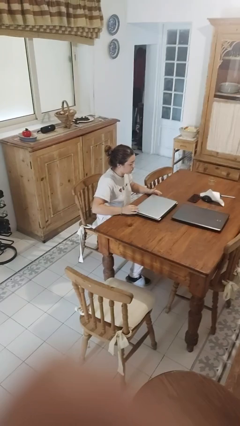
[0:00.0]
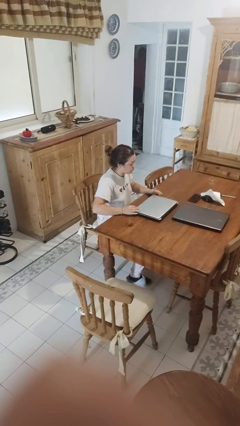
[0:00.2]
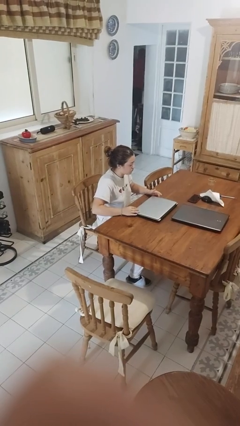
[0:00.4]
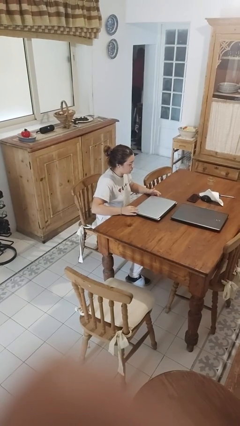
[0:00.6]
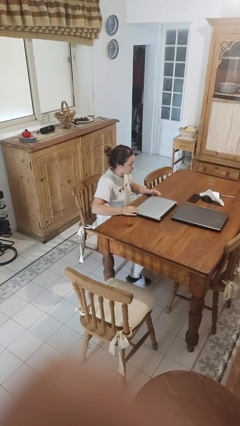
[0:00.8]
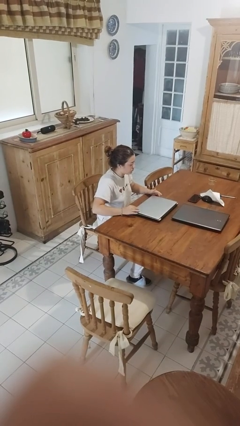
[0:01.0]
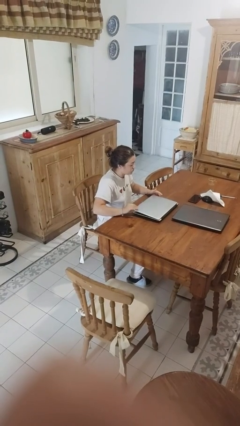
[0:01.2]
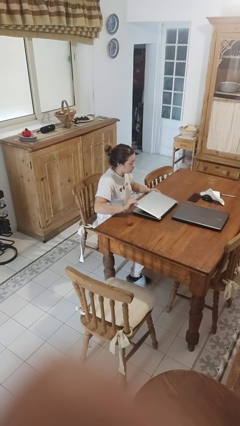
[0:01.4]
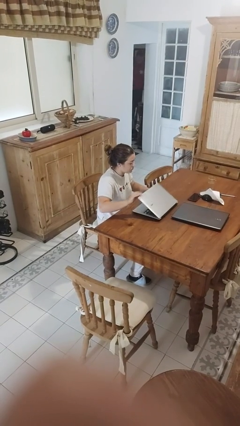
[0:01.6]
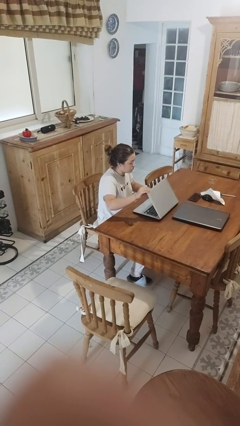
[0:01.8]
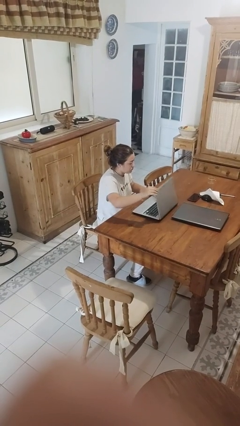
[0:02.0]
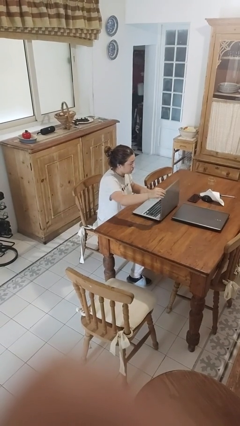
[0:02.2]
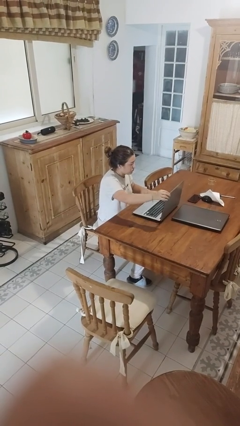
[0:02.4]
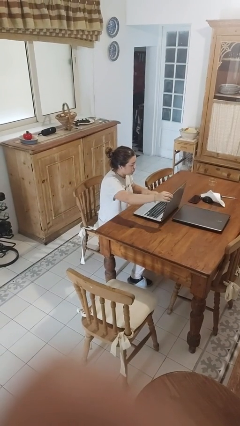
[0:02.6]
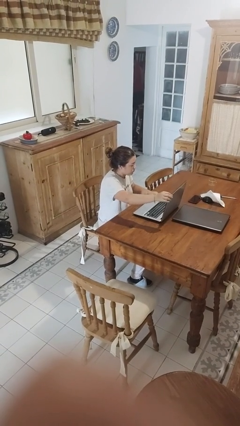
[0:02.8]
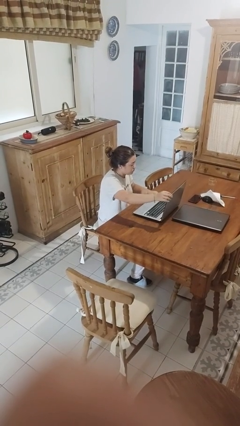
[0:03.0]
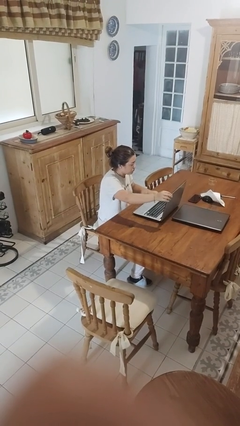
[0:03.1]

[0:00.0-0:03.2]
person opens laptop

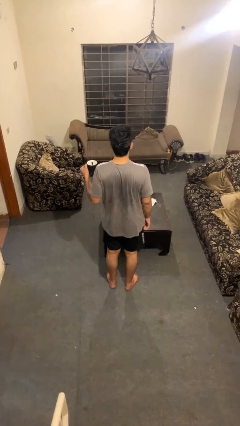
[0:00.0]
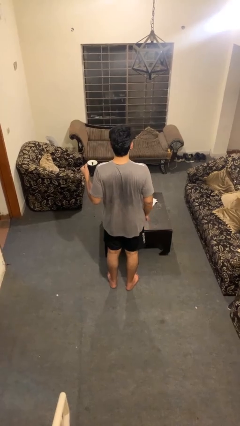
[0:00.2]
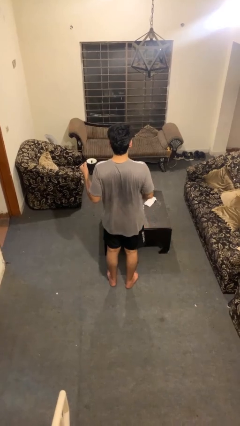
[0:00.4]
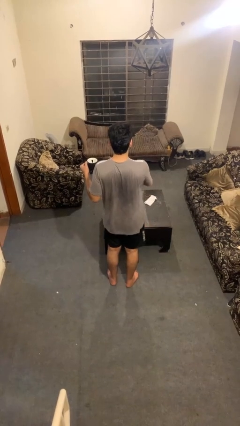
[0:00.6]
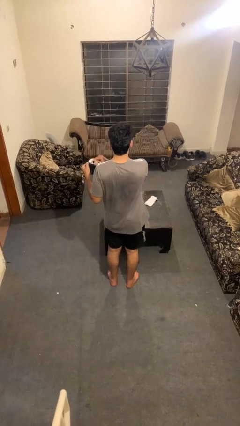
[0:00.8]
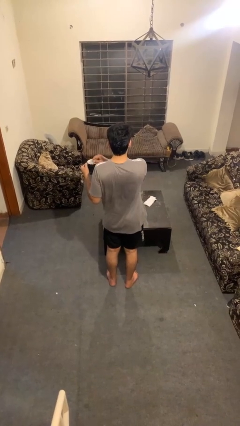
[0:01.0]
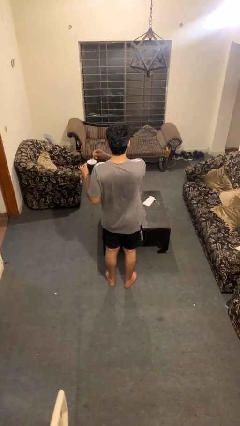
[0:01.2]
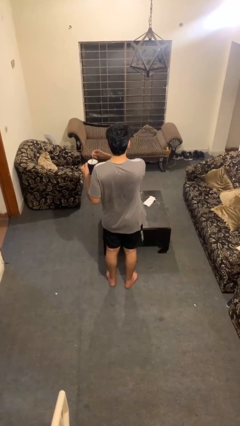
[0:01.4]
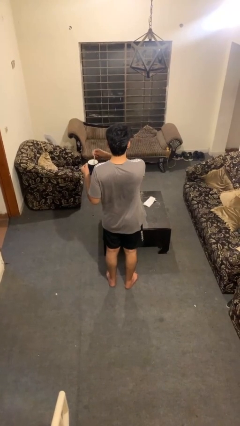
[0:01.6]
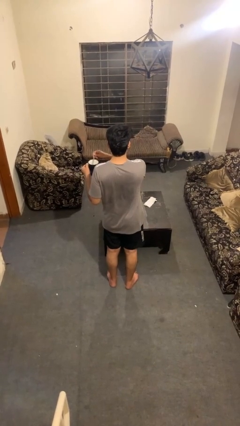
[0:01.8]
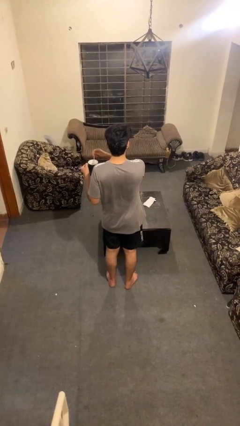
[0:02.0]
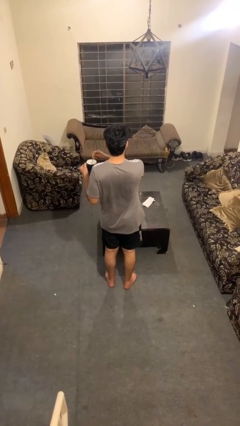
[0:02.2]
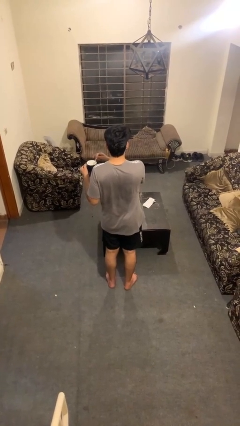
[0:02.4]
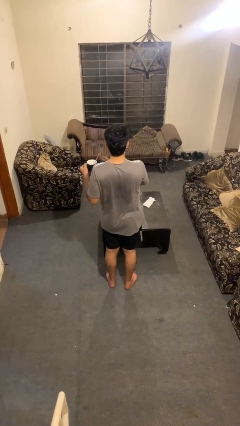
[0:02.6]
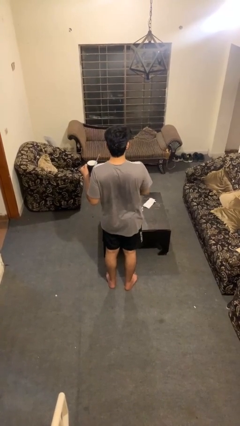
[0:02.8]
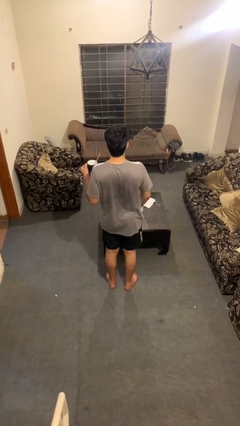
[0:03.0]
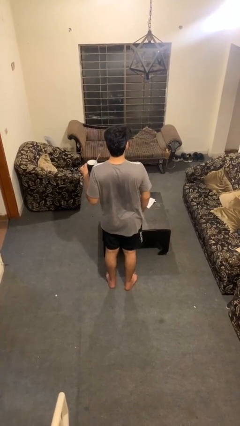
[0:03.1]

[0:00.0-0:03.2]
person stirs mug

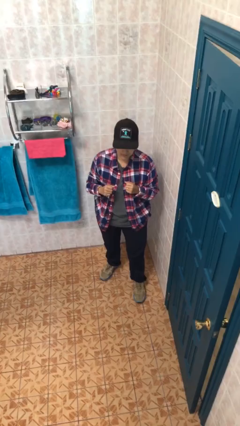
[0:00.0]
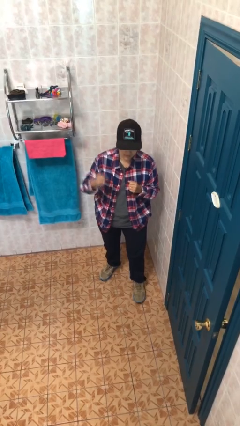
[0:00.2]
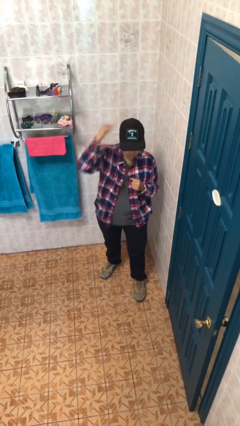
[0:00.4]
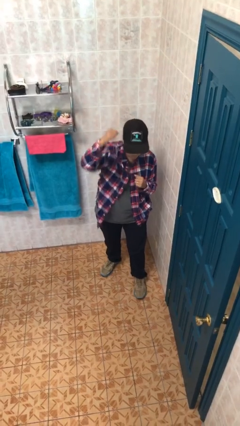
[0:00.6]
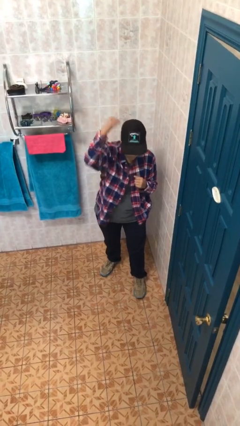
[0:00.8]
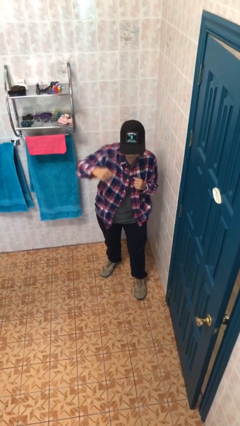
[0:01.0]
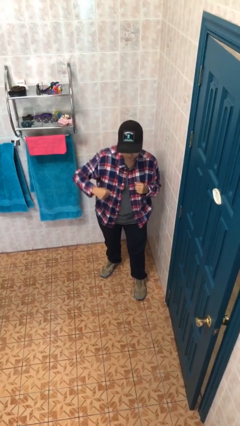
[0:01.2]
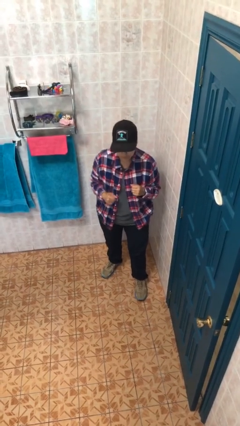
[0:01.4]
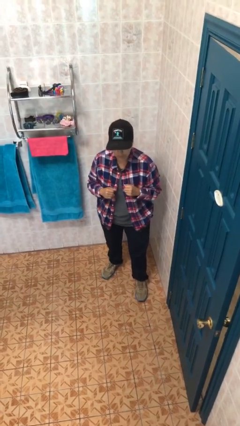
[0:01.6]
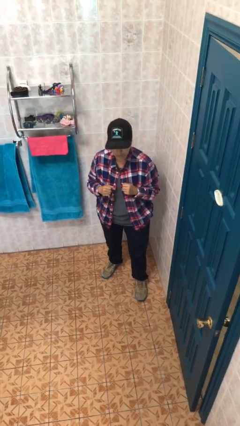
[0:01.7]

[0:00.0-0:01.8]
person punches

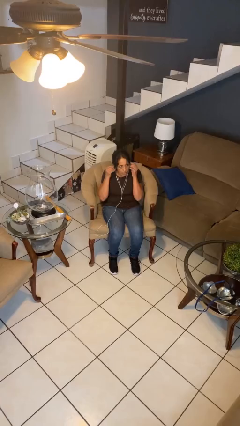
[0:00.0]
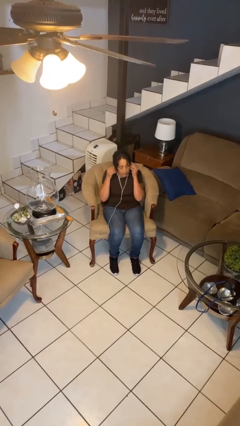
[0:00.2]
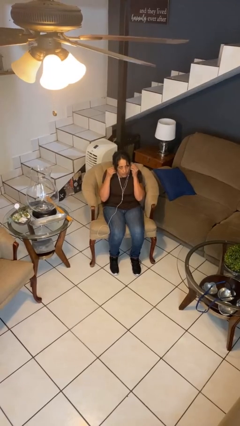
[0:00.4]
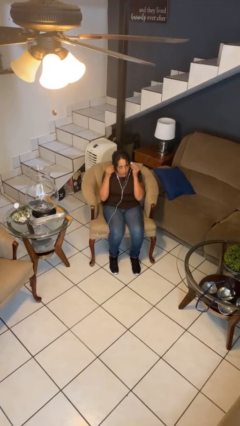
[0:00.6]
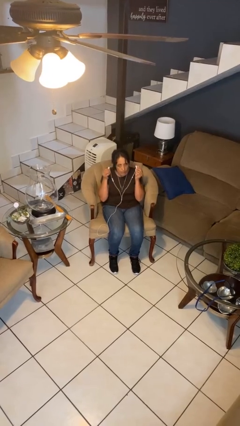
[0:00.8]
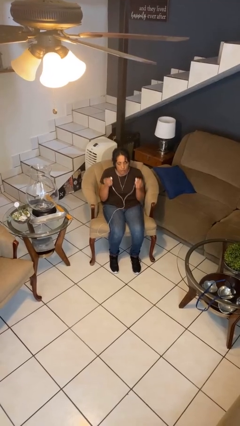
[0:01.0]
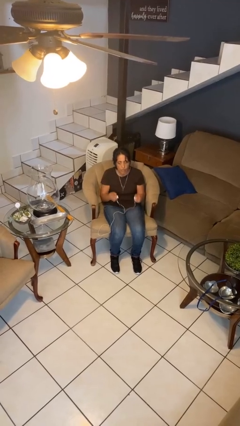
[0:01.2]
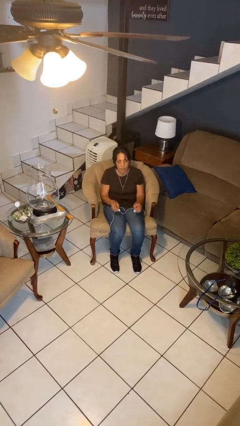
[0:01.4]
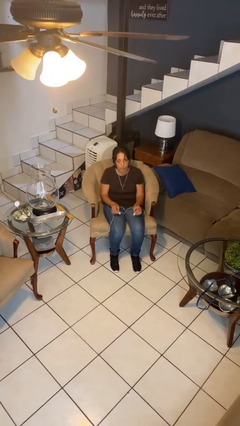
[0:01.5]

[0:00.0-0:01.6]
person takes off headphones

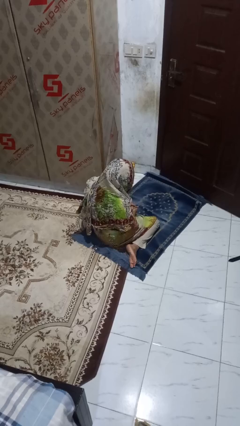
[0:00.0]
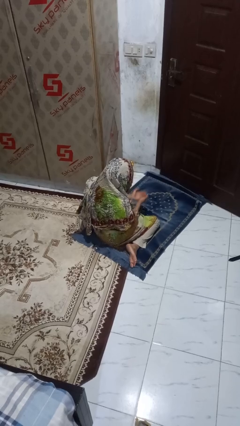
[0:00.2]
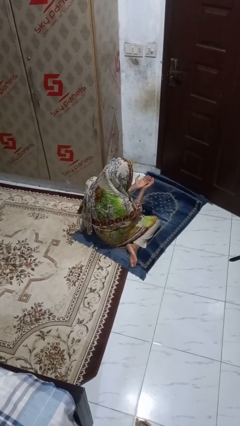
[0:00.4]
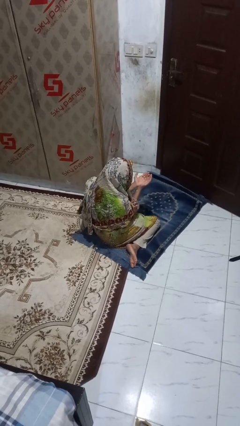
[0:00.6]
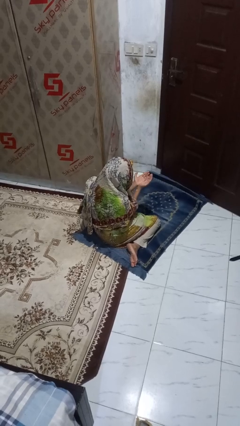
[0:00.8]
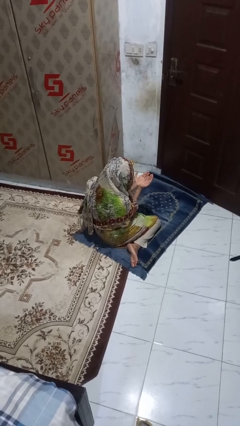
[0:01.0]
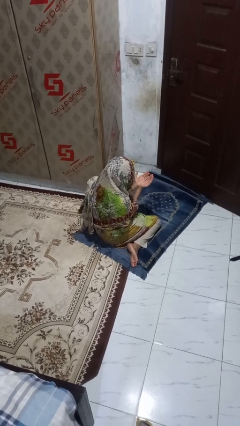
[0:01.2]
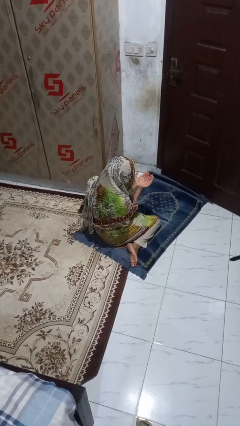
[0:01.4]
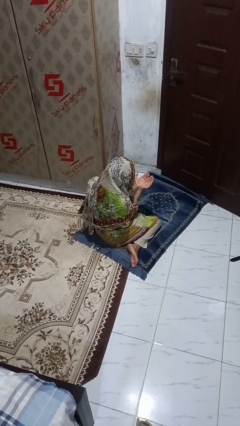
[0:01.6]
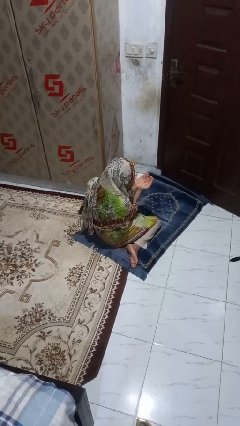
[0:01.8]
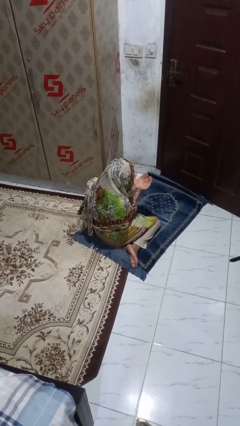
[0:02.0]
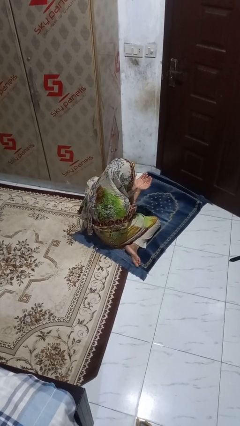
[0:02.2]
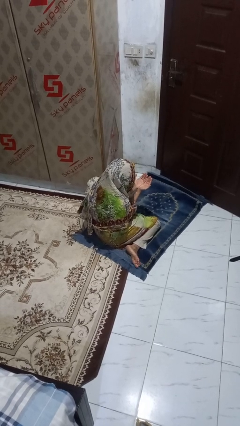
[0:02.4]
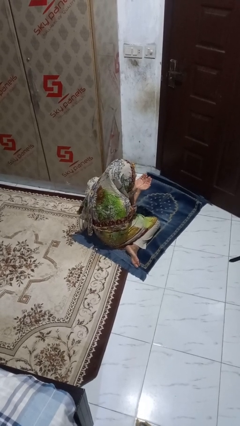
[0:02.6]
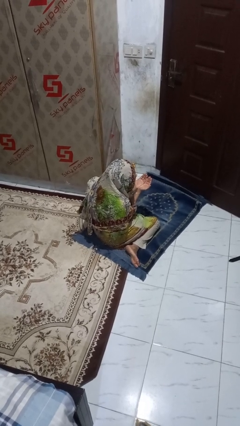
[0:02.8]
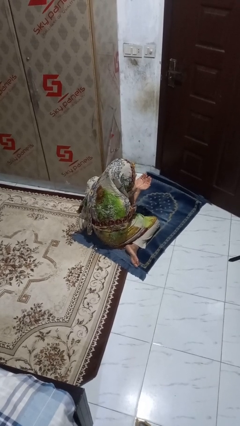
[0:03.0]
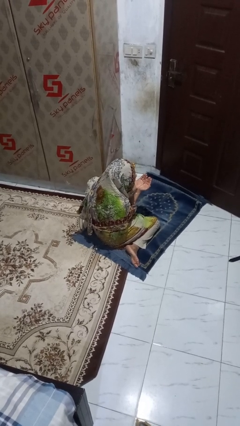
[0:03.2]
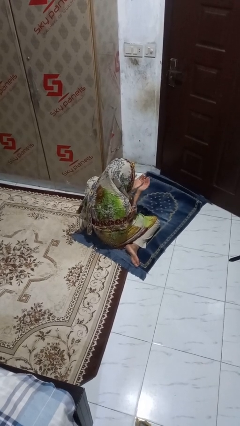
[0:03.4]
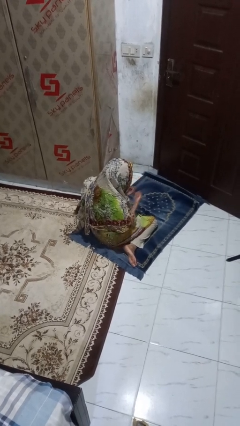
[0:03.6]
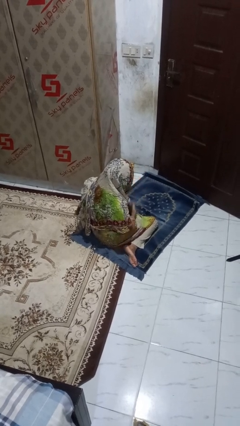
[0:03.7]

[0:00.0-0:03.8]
person prays

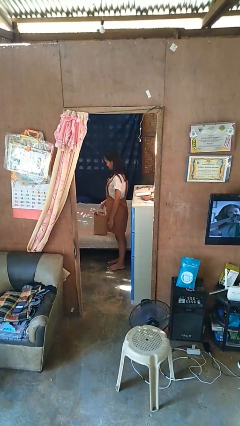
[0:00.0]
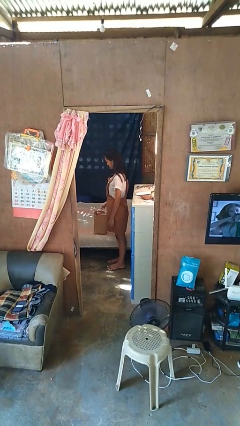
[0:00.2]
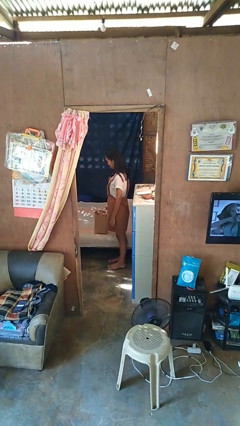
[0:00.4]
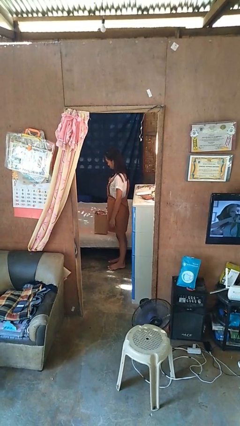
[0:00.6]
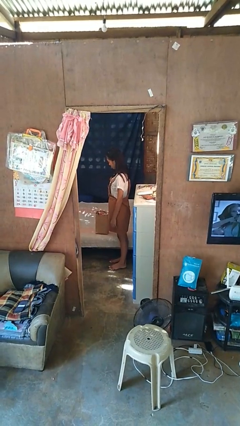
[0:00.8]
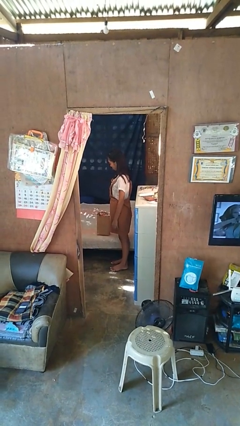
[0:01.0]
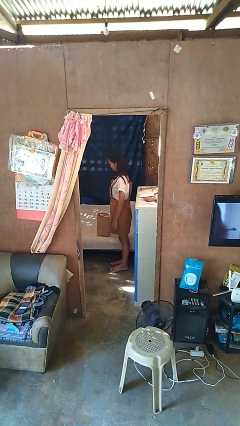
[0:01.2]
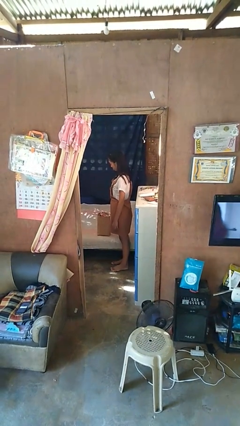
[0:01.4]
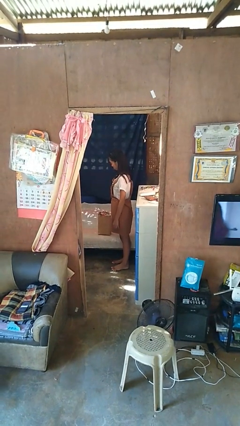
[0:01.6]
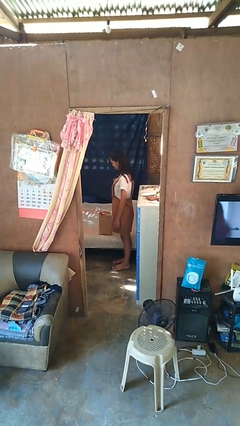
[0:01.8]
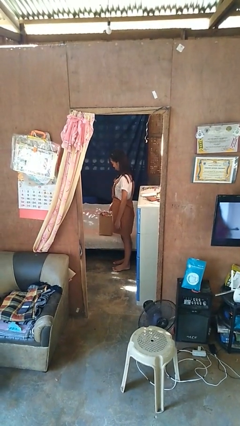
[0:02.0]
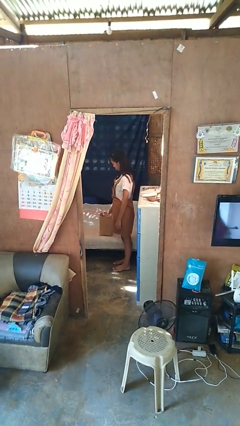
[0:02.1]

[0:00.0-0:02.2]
person puts down object on couch

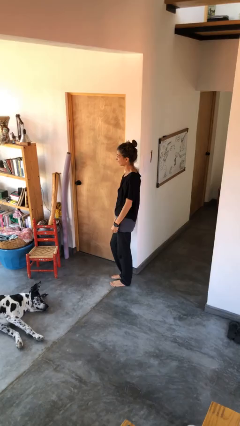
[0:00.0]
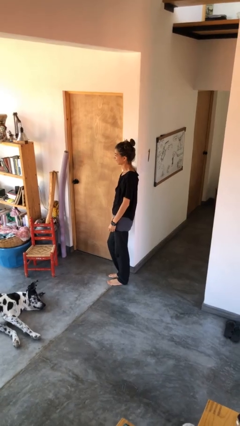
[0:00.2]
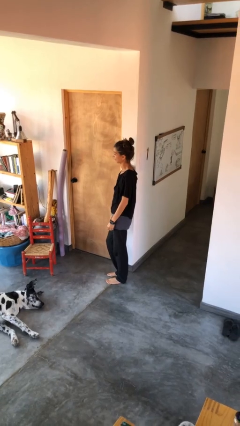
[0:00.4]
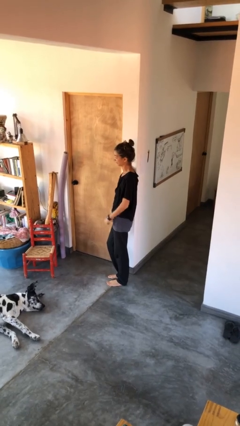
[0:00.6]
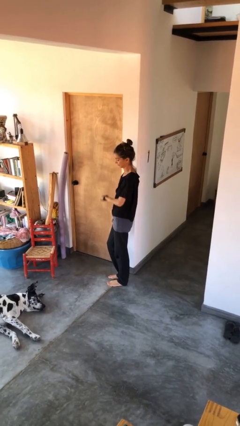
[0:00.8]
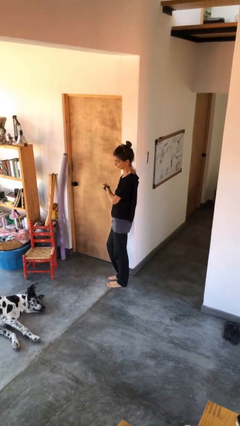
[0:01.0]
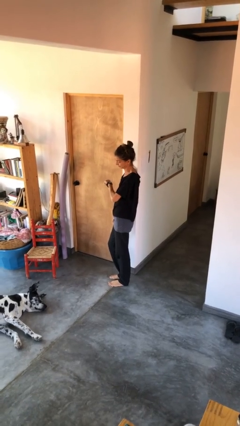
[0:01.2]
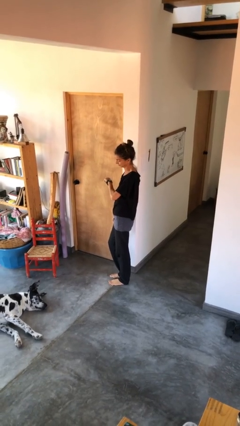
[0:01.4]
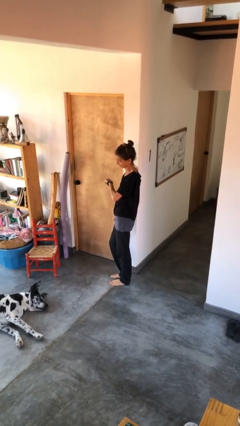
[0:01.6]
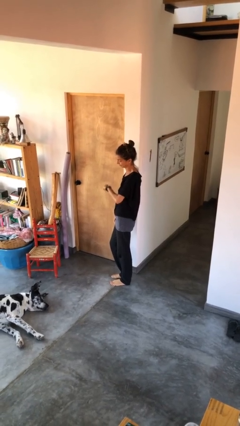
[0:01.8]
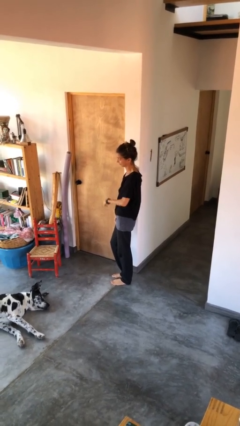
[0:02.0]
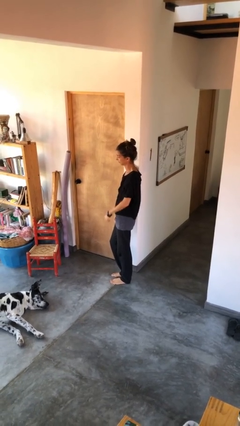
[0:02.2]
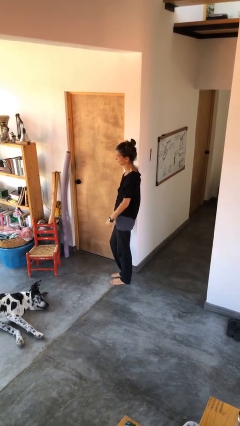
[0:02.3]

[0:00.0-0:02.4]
person looks at wristwatch
